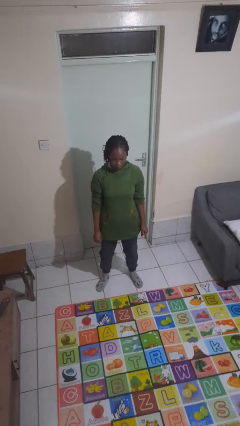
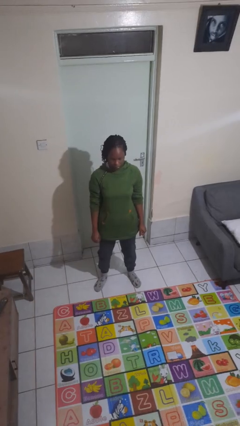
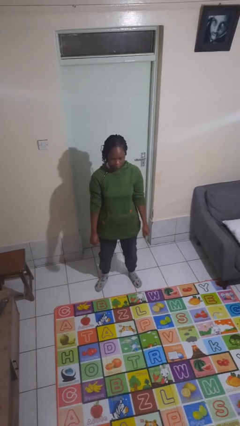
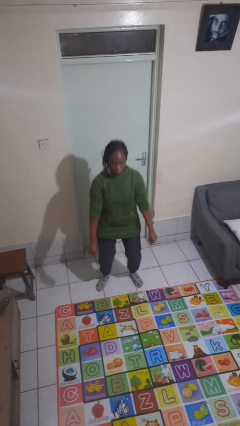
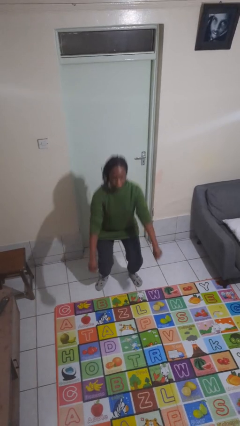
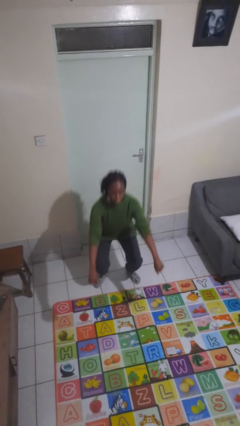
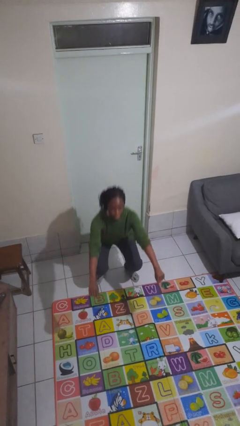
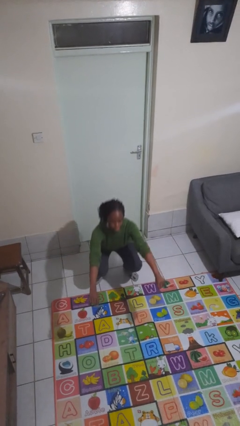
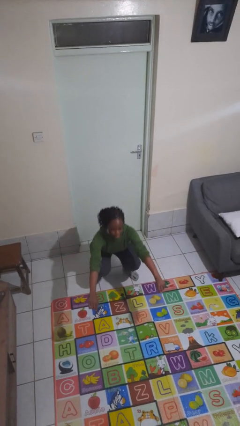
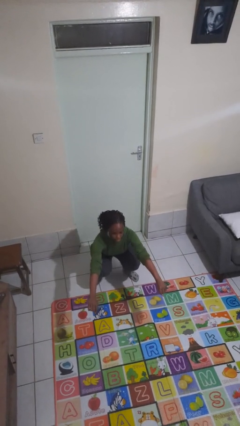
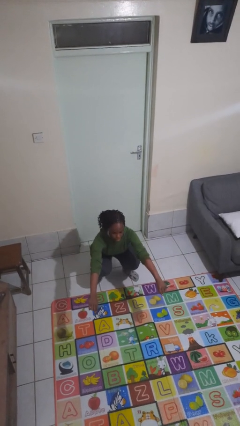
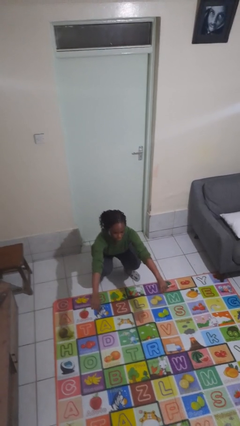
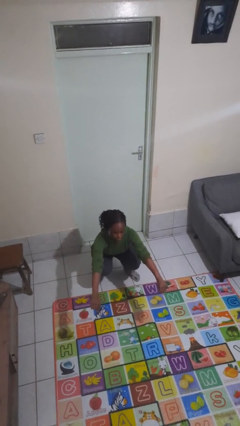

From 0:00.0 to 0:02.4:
person squats

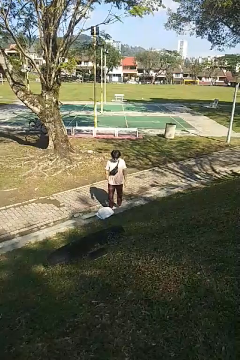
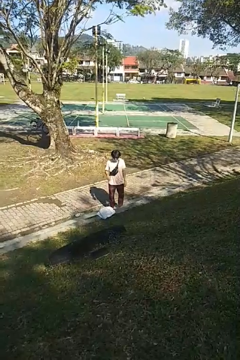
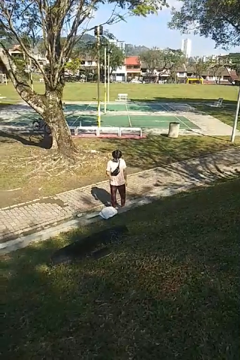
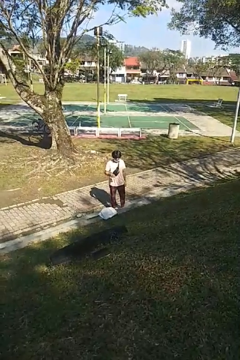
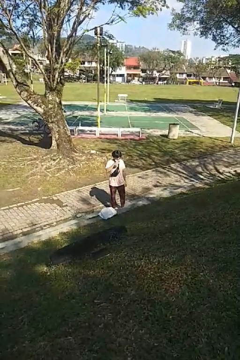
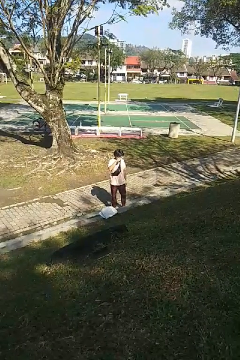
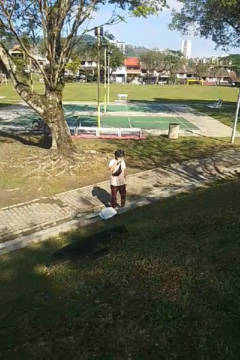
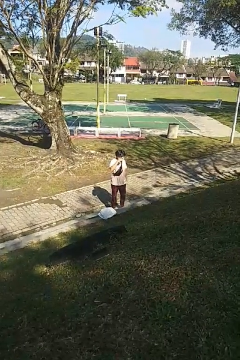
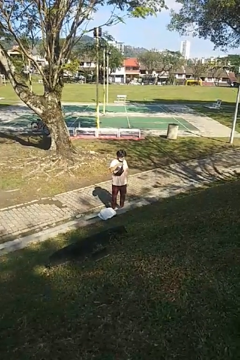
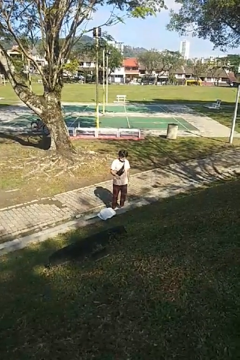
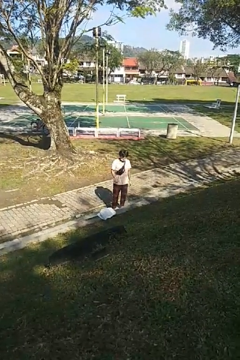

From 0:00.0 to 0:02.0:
person brushes teeth

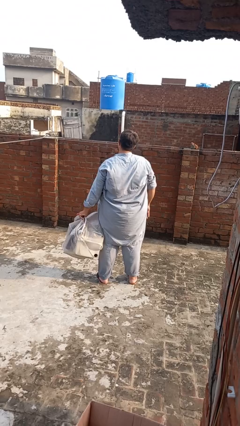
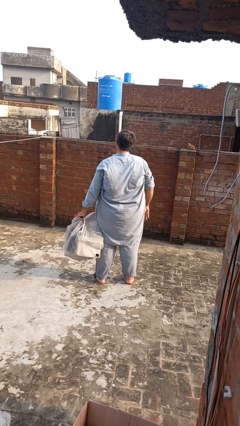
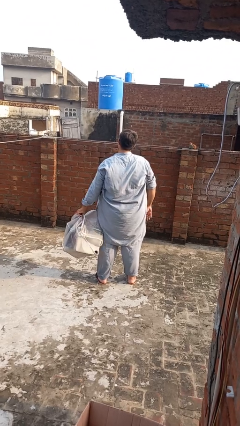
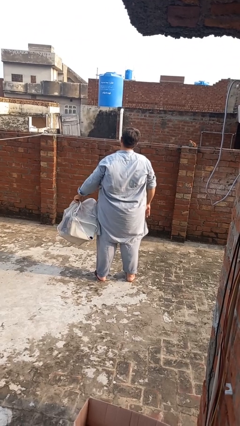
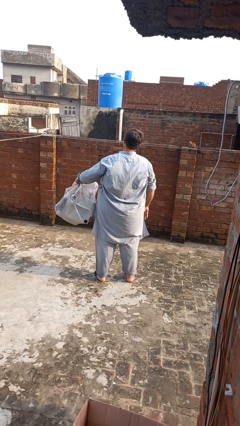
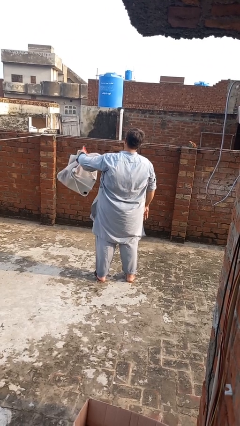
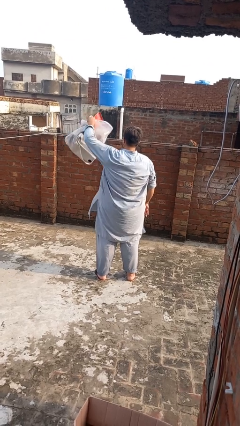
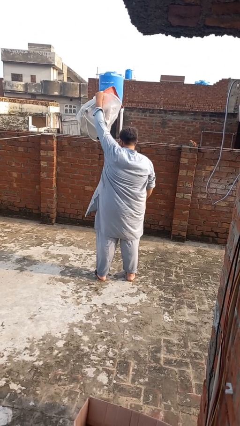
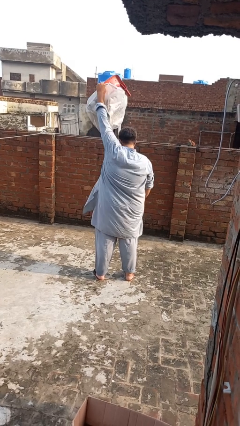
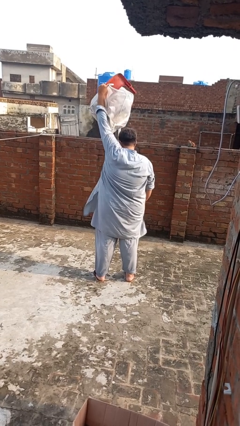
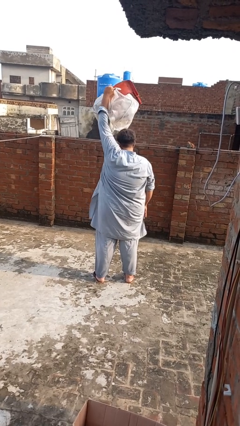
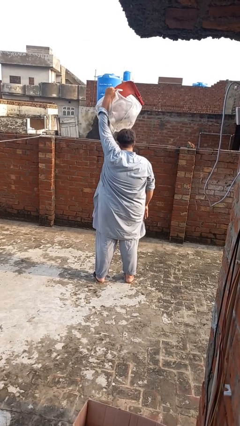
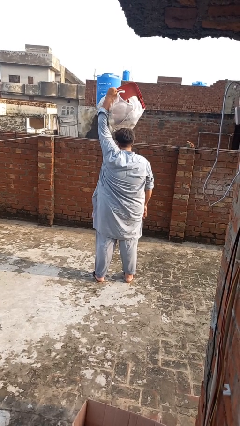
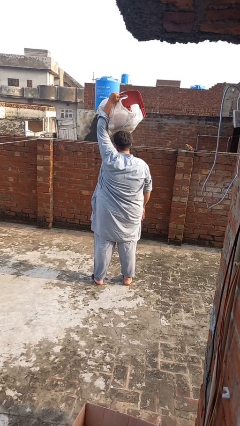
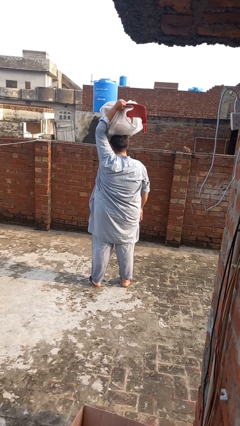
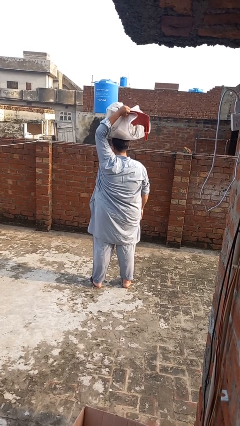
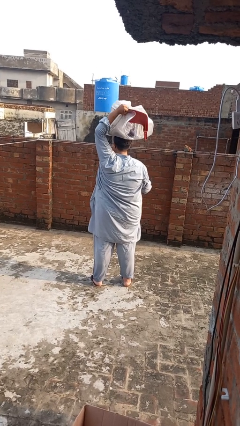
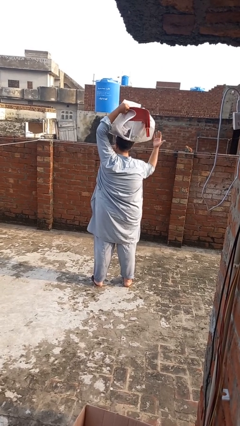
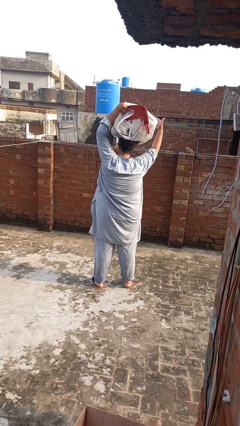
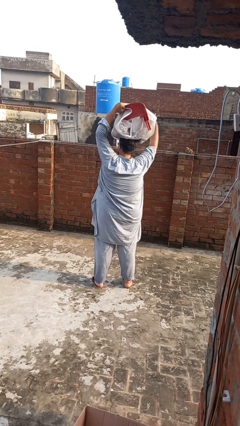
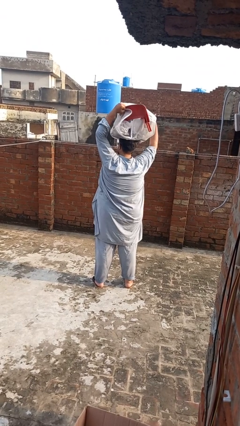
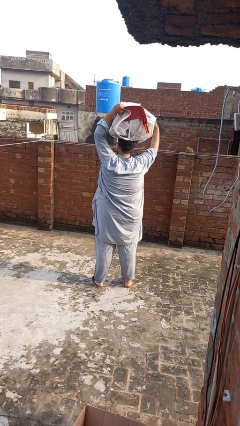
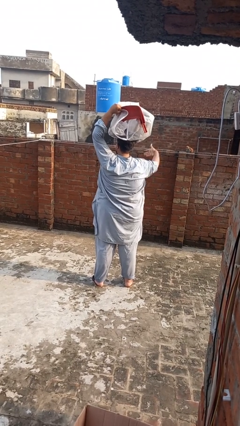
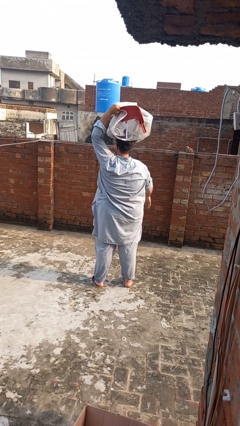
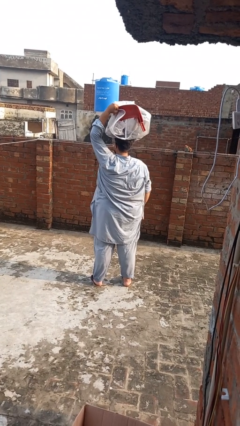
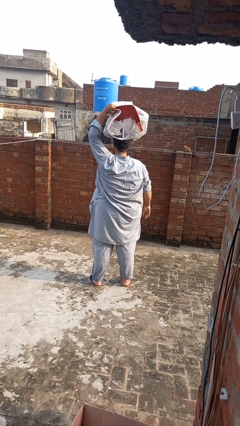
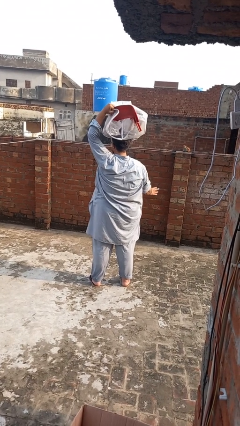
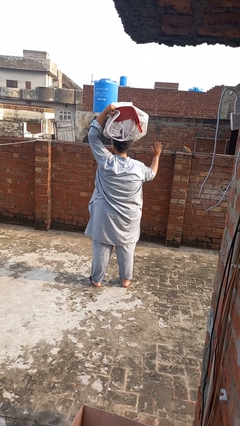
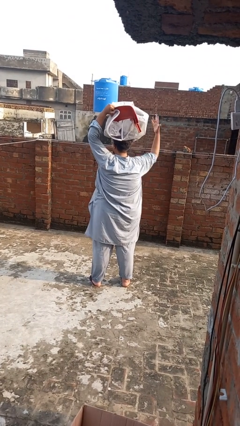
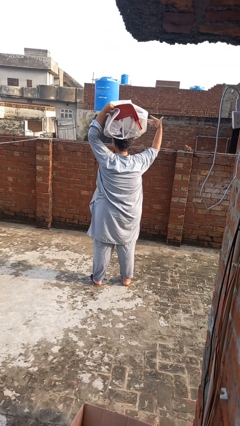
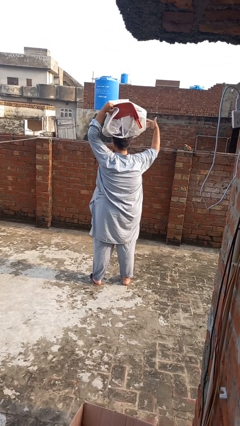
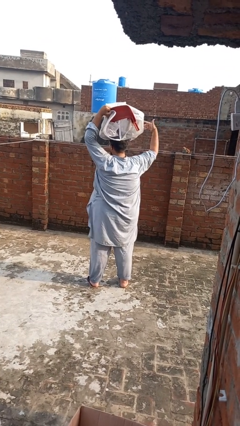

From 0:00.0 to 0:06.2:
person holds object above head

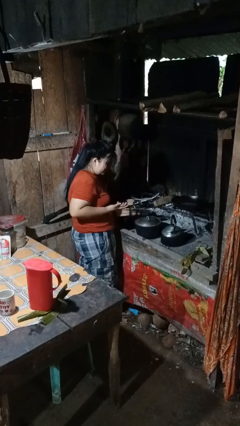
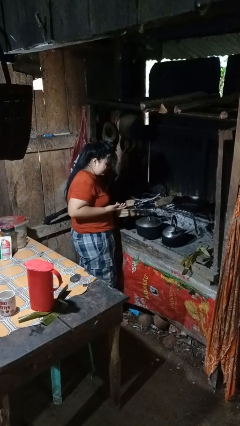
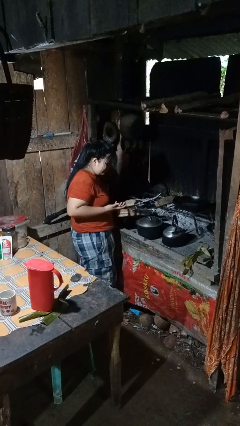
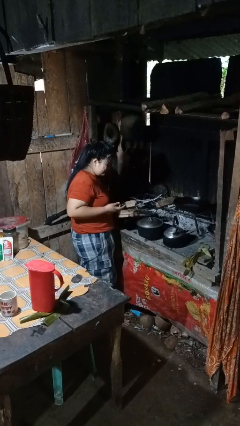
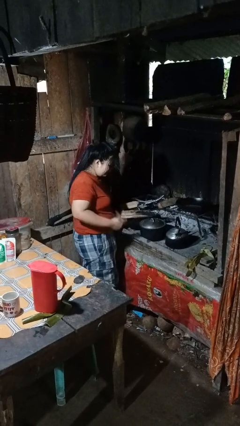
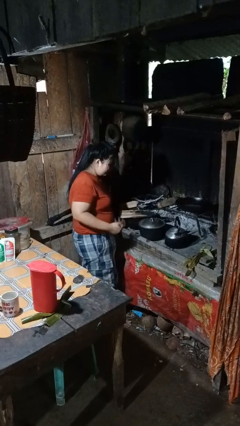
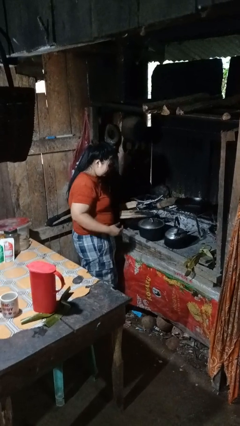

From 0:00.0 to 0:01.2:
person burns hand

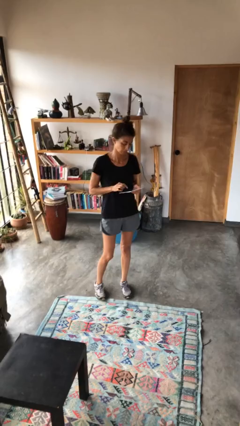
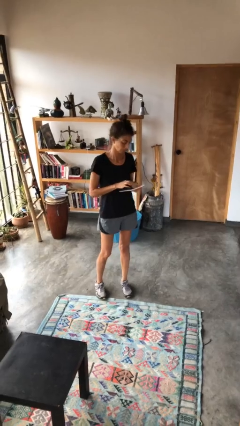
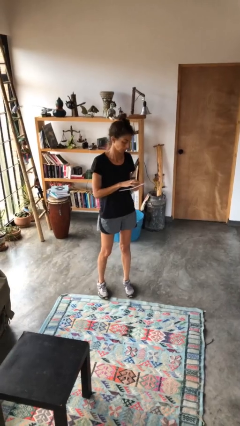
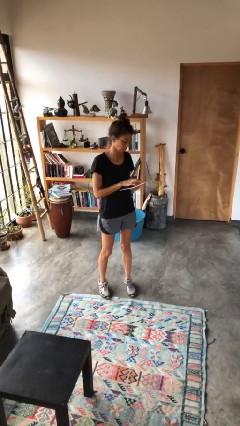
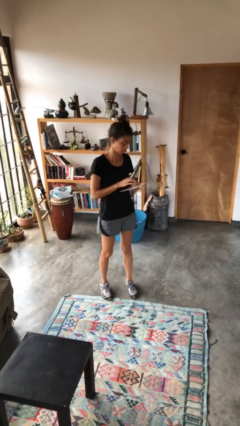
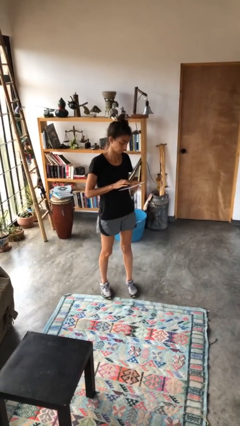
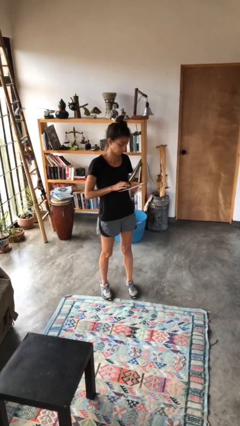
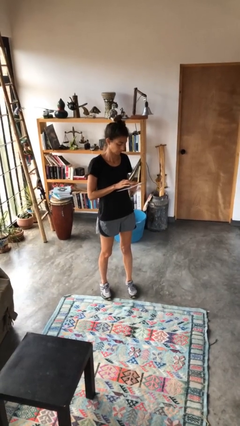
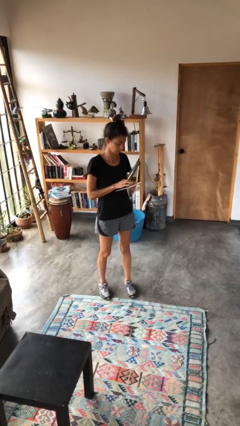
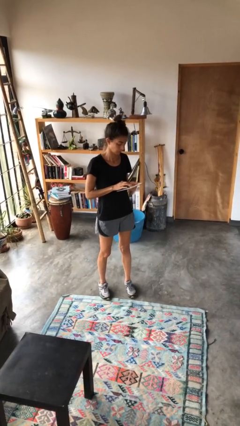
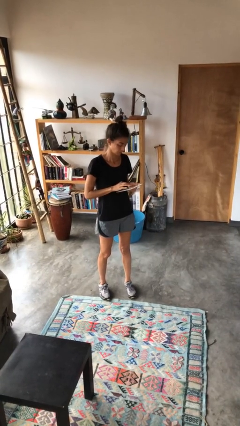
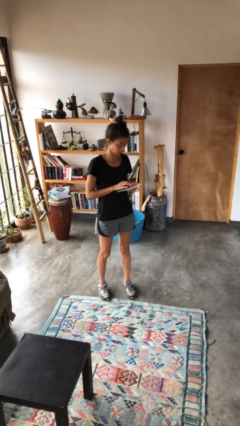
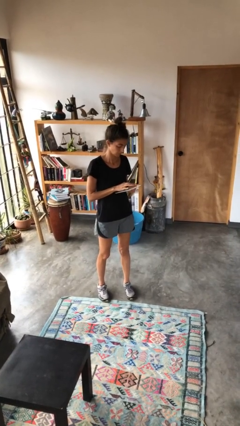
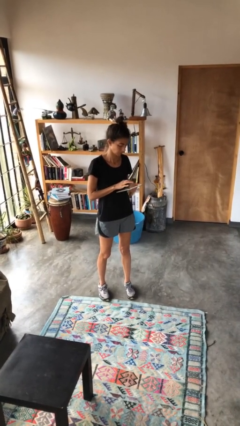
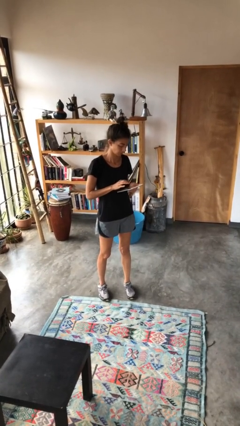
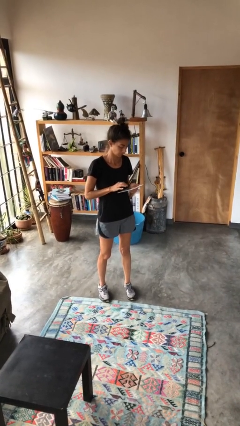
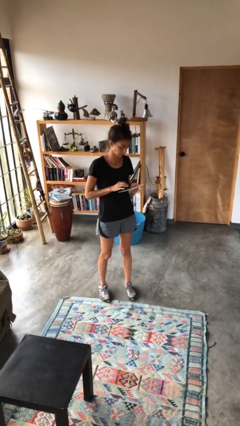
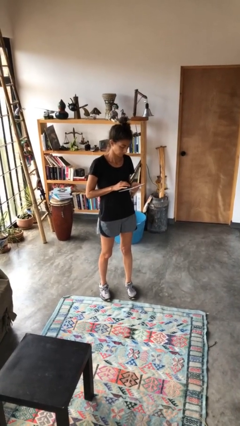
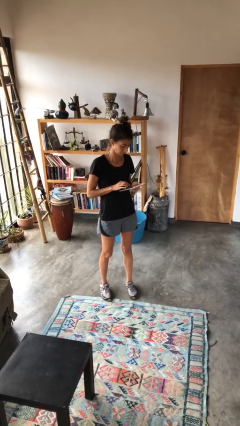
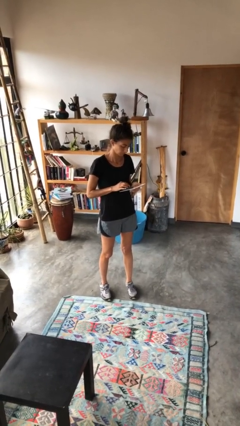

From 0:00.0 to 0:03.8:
person interacts with tablet

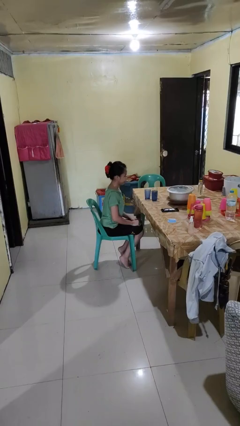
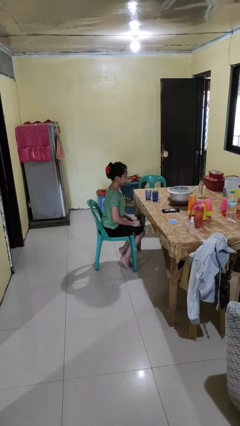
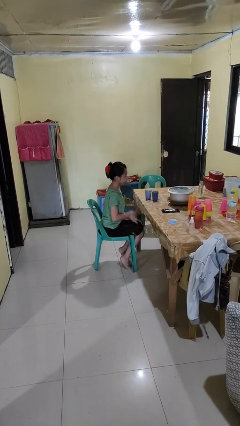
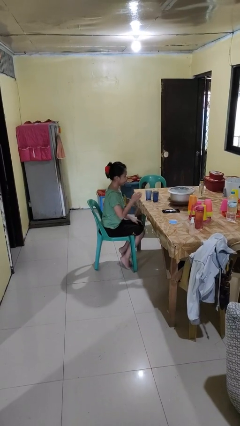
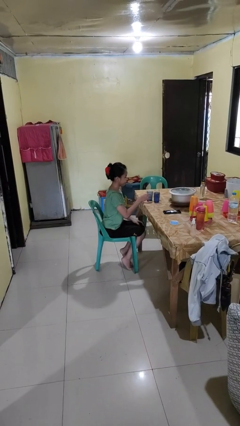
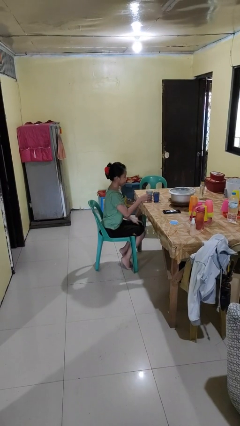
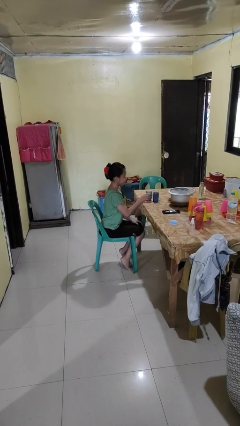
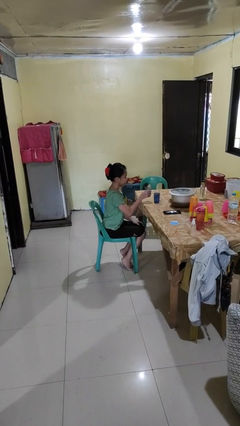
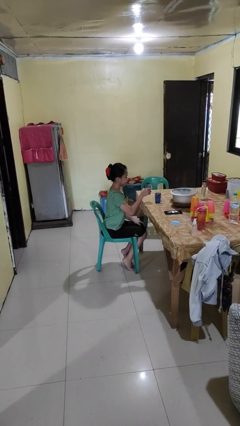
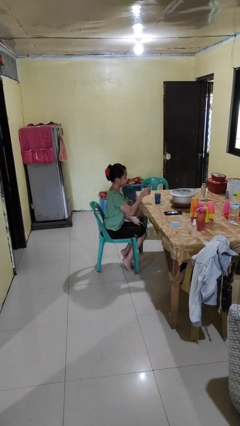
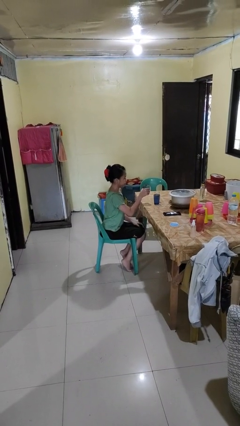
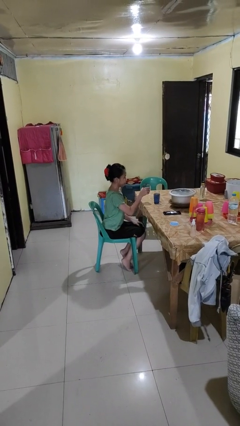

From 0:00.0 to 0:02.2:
person picks up object from table
